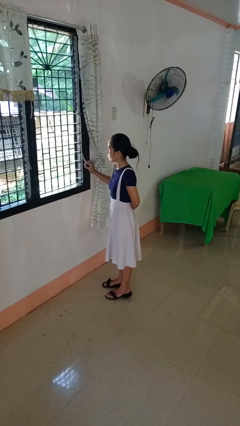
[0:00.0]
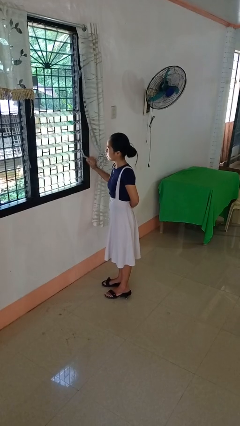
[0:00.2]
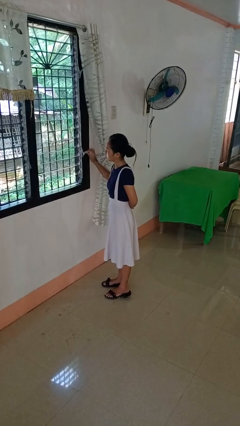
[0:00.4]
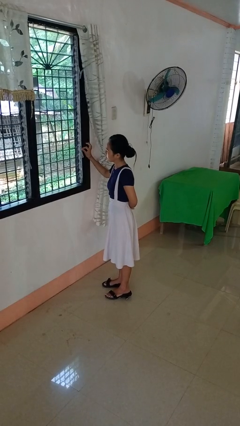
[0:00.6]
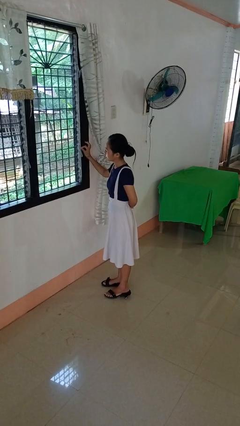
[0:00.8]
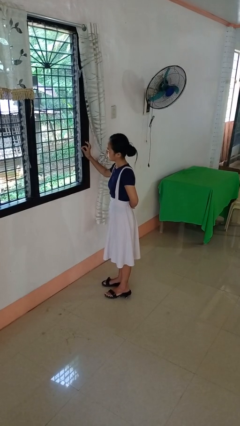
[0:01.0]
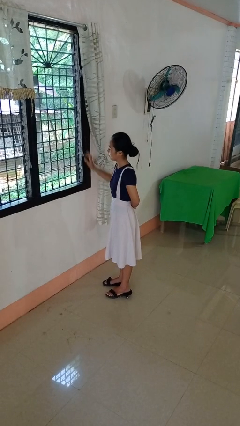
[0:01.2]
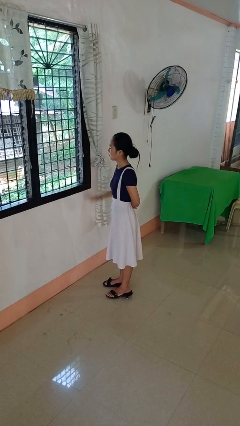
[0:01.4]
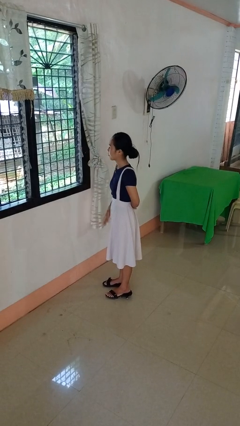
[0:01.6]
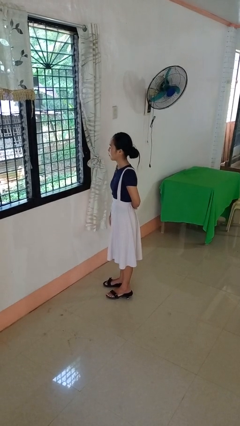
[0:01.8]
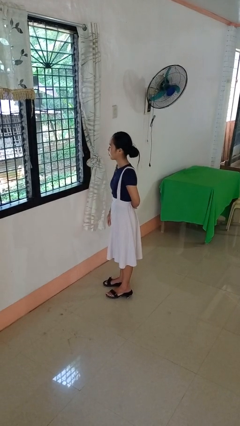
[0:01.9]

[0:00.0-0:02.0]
person closes home window

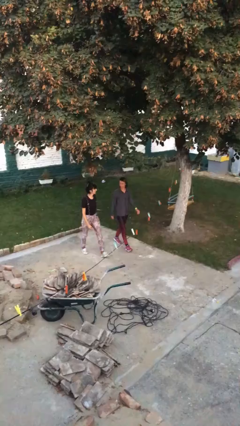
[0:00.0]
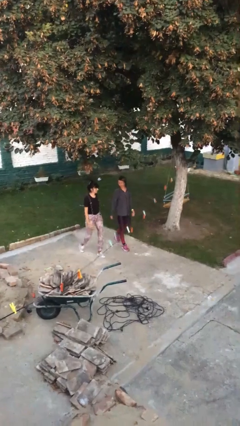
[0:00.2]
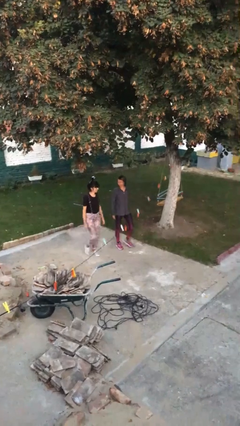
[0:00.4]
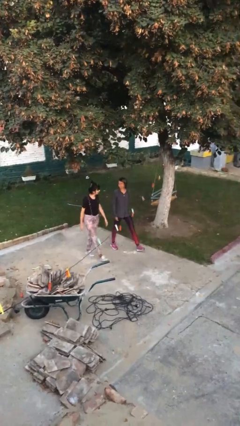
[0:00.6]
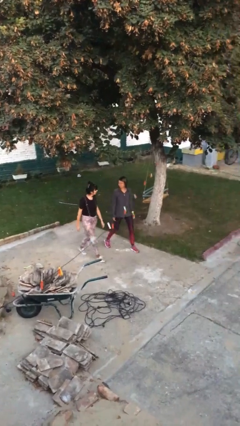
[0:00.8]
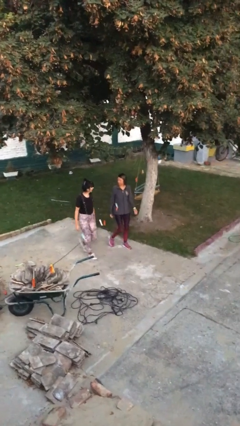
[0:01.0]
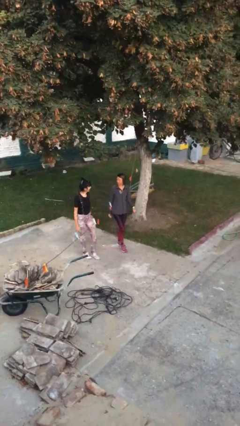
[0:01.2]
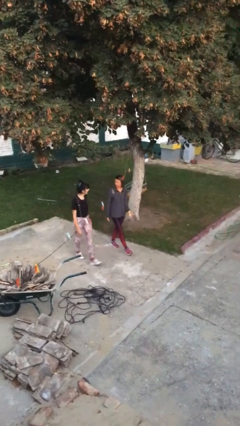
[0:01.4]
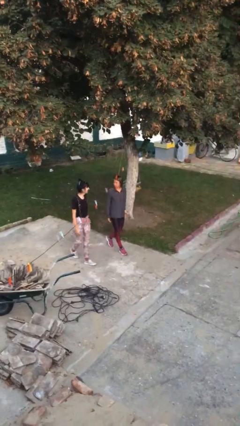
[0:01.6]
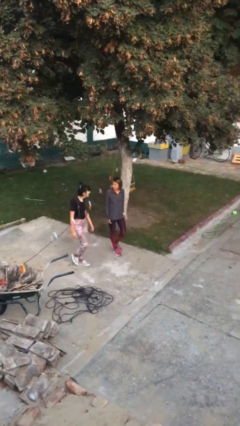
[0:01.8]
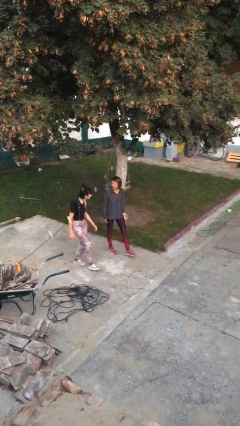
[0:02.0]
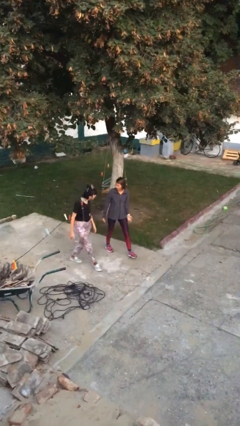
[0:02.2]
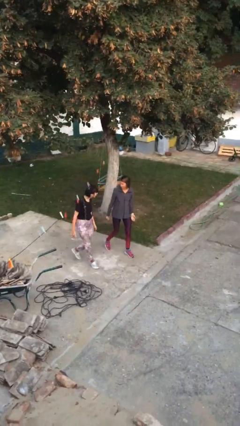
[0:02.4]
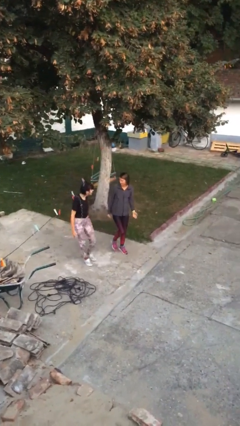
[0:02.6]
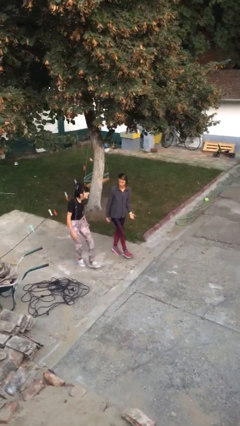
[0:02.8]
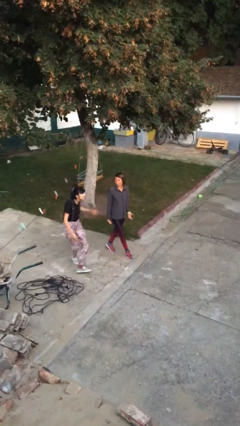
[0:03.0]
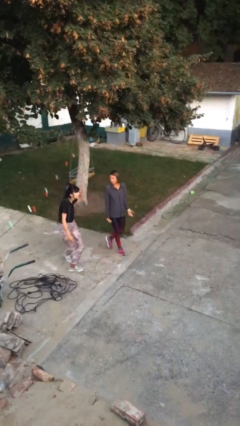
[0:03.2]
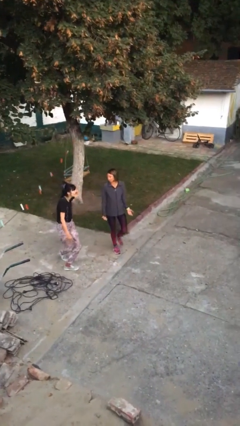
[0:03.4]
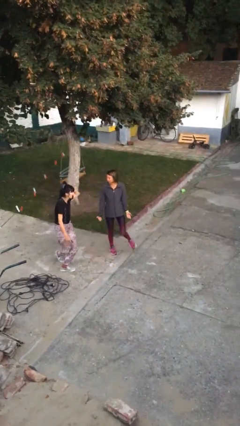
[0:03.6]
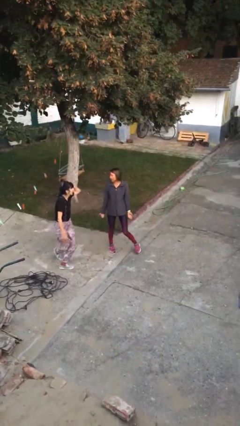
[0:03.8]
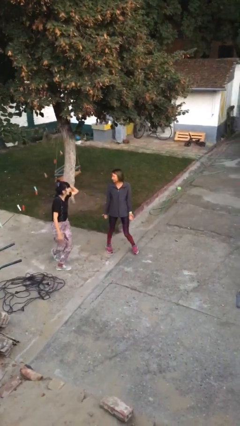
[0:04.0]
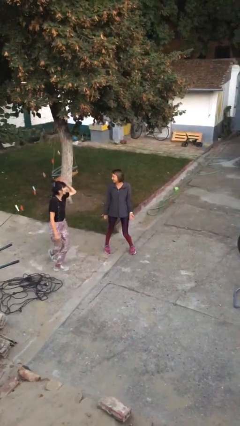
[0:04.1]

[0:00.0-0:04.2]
person talks to person

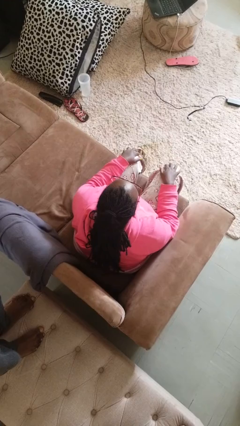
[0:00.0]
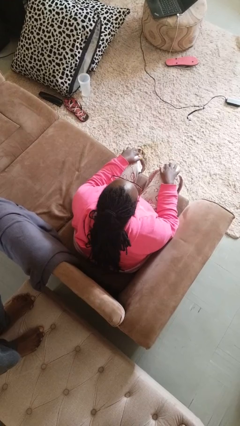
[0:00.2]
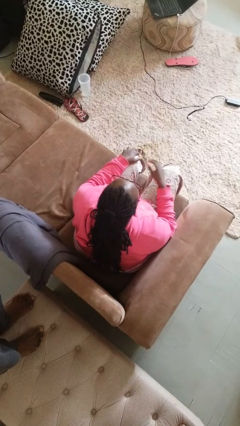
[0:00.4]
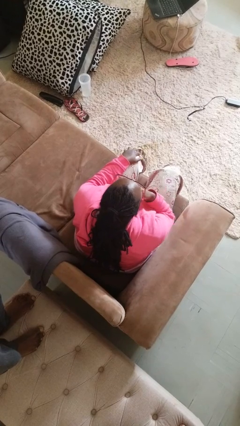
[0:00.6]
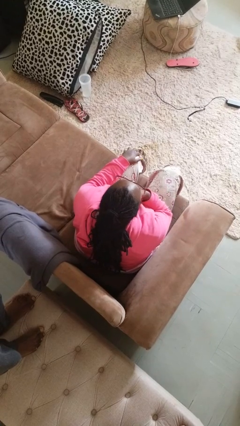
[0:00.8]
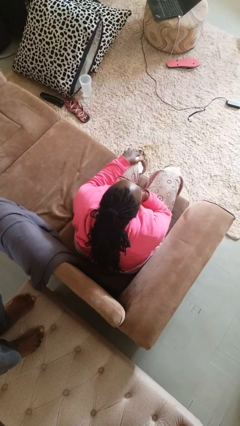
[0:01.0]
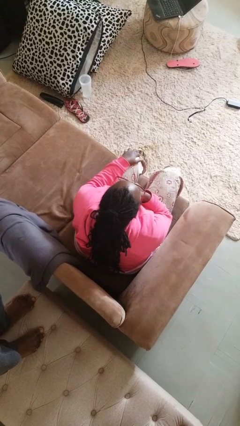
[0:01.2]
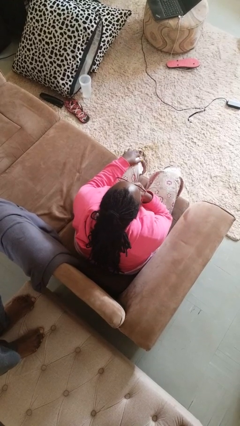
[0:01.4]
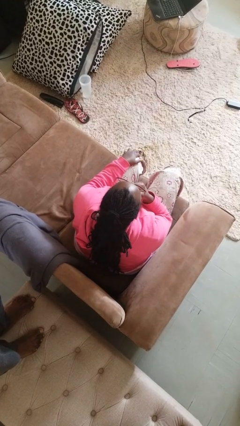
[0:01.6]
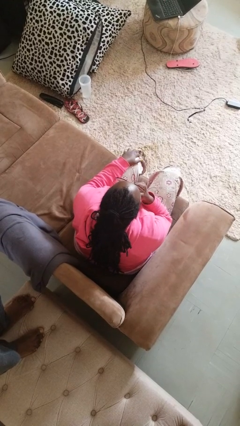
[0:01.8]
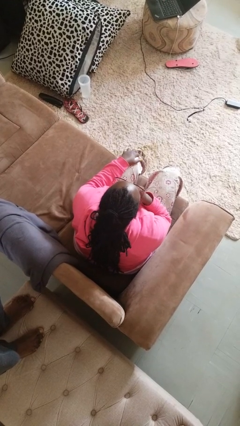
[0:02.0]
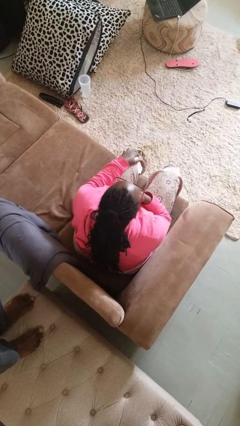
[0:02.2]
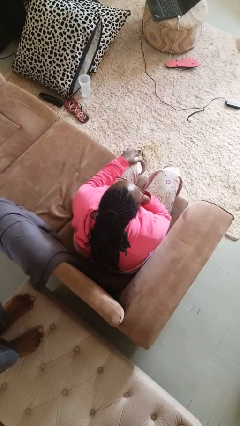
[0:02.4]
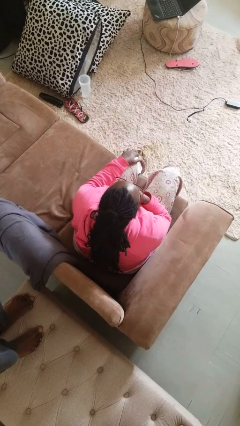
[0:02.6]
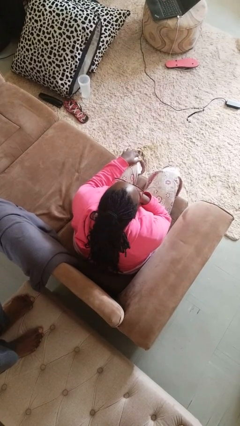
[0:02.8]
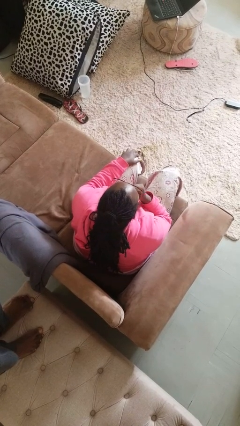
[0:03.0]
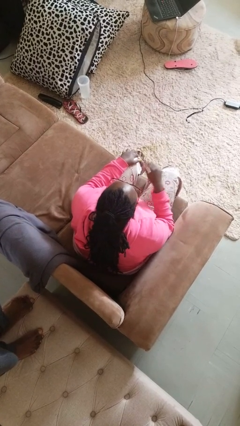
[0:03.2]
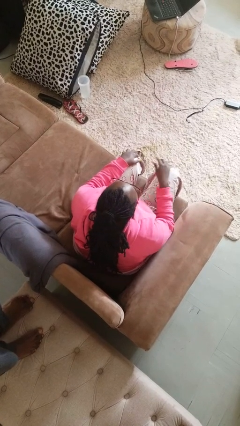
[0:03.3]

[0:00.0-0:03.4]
person strokes chin

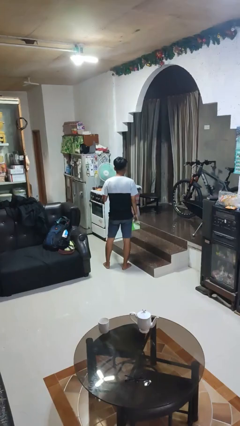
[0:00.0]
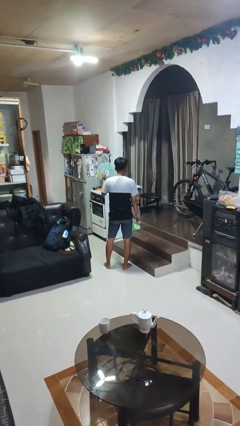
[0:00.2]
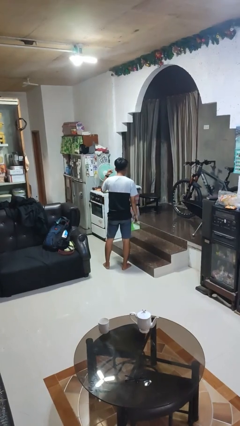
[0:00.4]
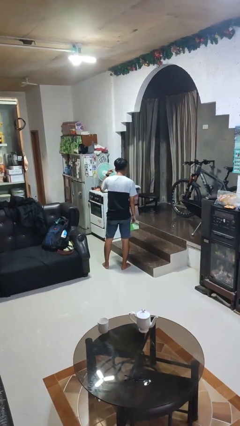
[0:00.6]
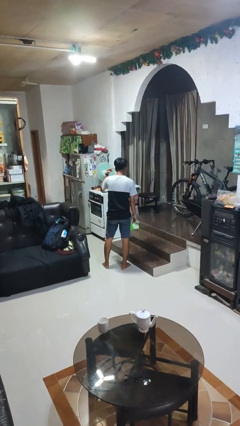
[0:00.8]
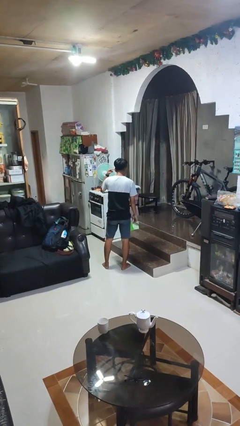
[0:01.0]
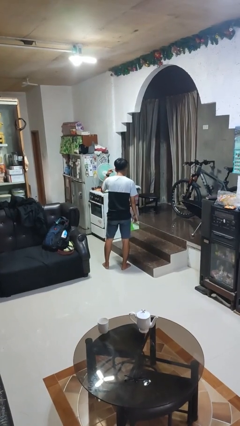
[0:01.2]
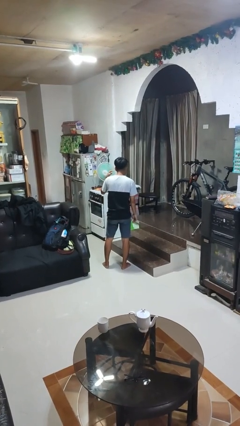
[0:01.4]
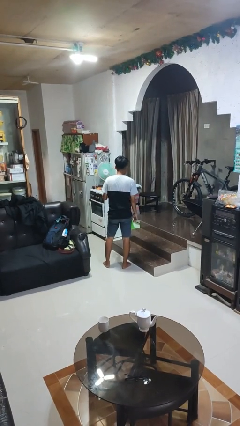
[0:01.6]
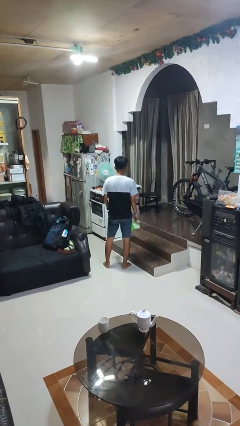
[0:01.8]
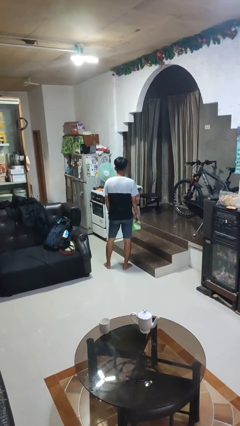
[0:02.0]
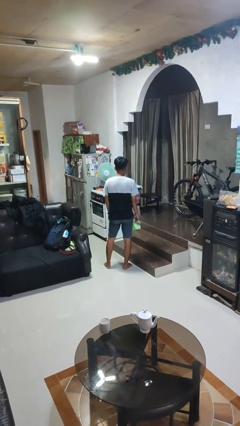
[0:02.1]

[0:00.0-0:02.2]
person gestures listen closely

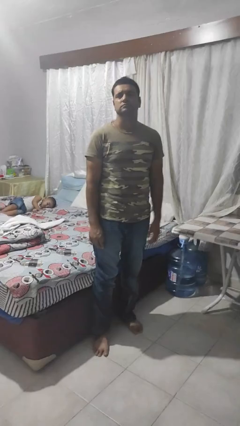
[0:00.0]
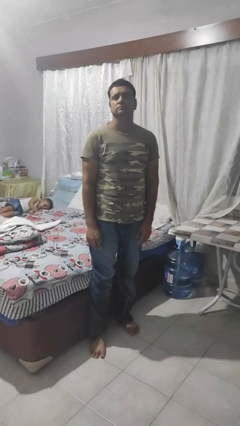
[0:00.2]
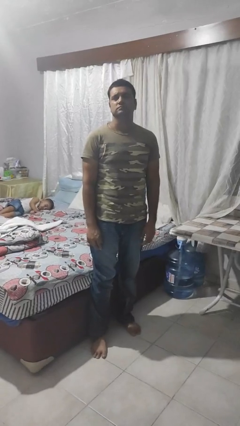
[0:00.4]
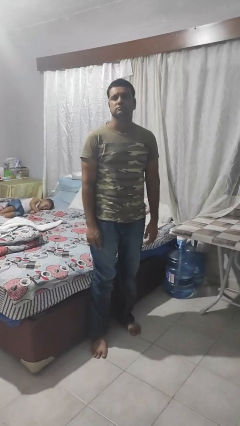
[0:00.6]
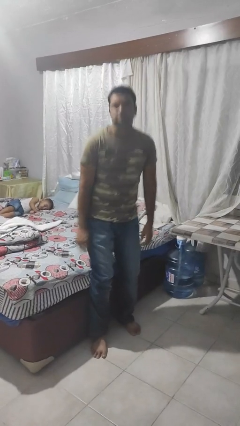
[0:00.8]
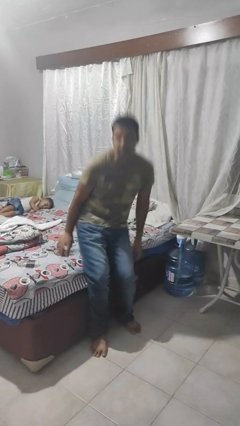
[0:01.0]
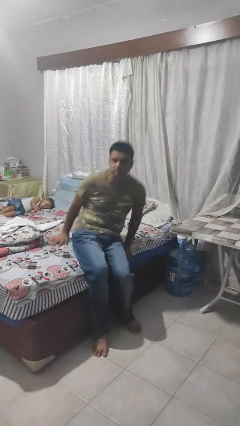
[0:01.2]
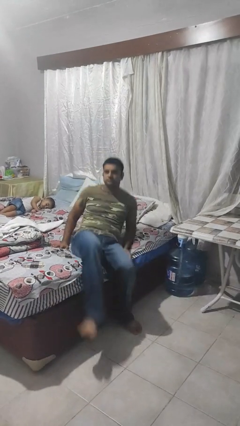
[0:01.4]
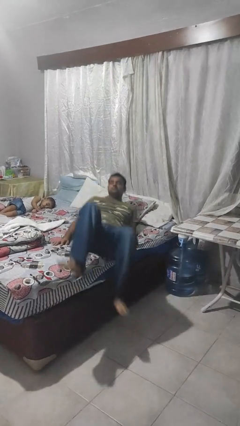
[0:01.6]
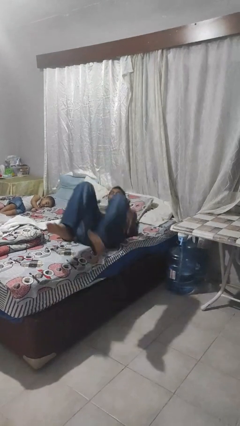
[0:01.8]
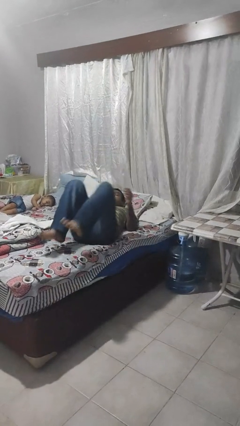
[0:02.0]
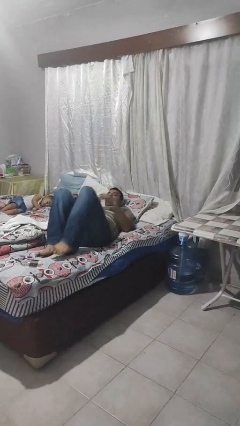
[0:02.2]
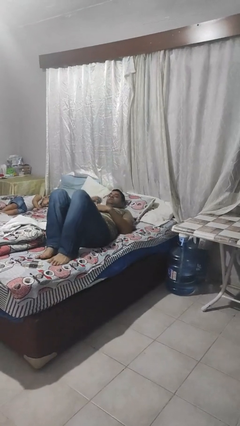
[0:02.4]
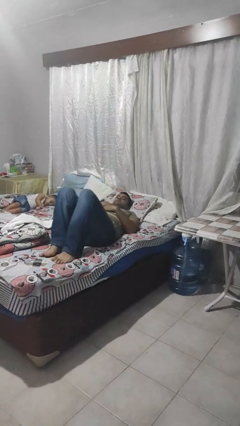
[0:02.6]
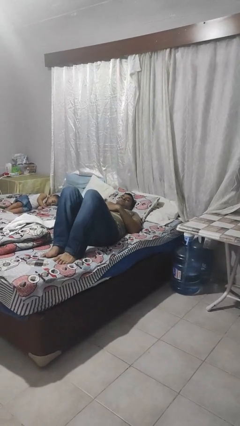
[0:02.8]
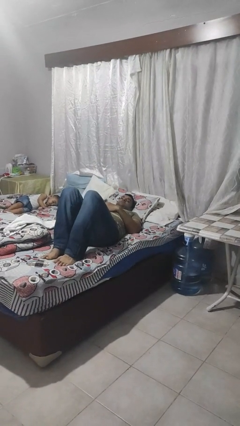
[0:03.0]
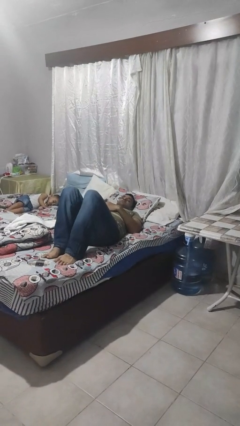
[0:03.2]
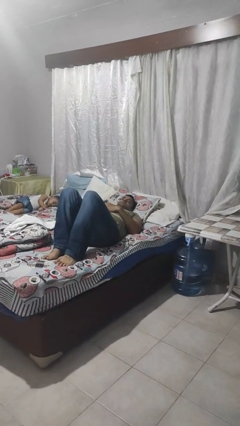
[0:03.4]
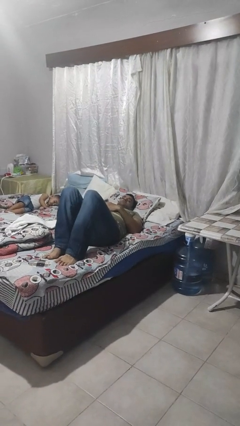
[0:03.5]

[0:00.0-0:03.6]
person lies down on bed

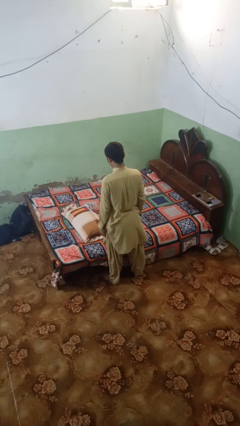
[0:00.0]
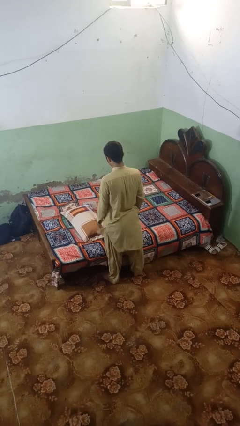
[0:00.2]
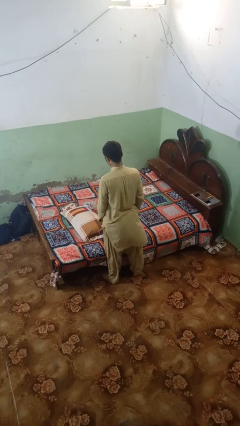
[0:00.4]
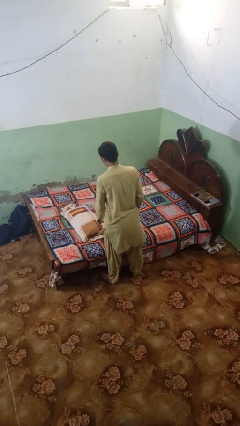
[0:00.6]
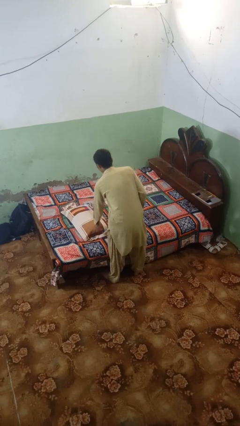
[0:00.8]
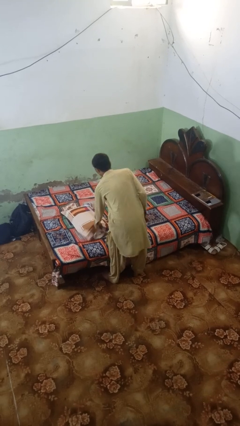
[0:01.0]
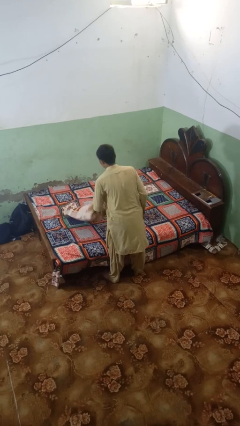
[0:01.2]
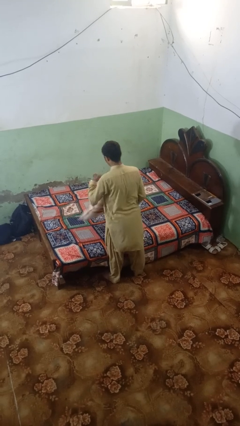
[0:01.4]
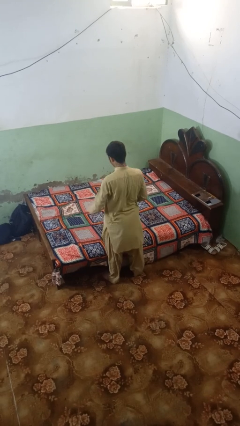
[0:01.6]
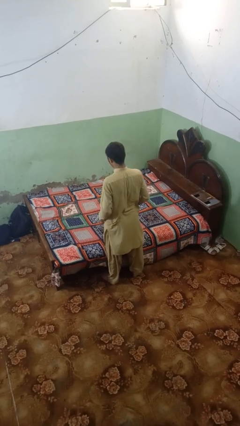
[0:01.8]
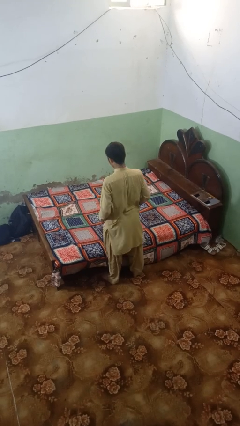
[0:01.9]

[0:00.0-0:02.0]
person picks up object from bed

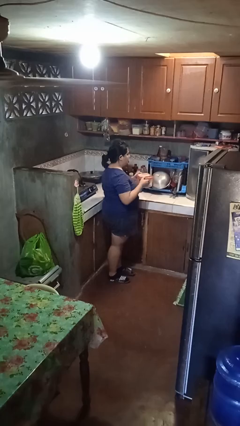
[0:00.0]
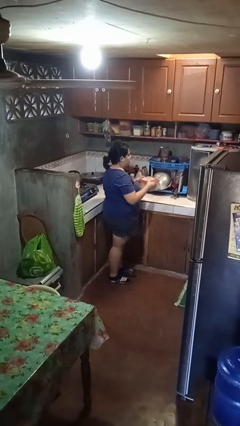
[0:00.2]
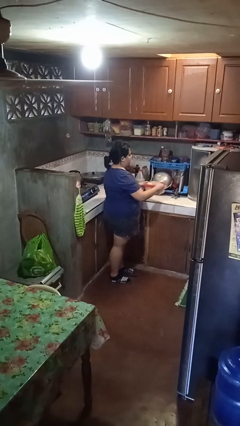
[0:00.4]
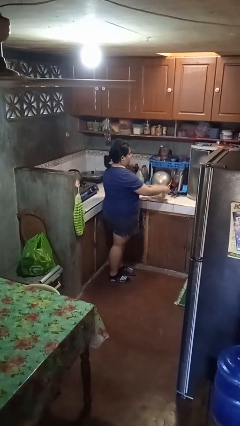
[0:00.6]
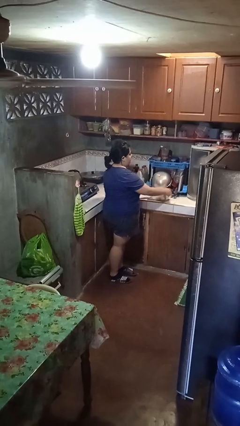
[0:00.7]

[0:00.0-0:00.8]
person puts down object on countertop
